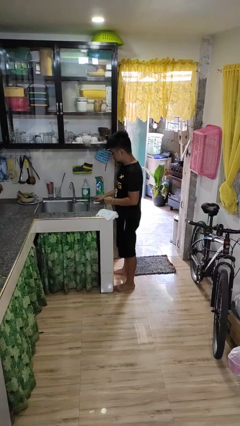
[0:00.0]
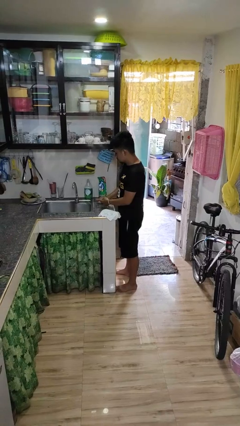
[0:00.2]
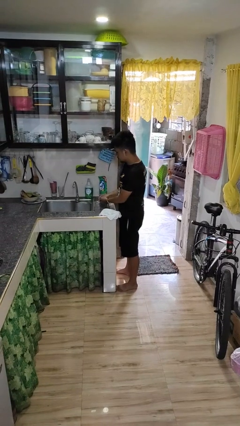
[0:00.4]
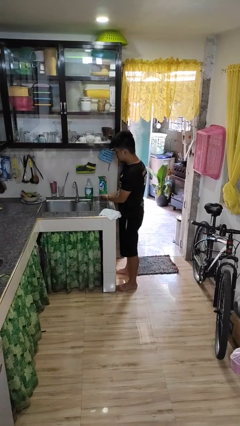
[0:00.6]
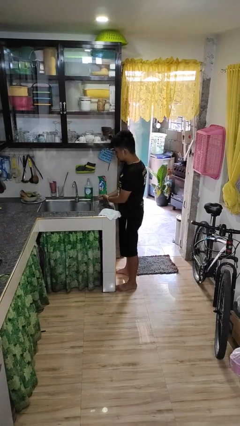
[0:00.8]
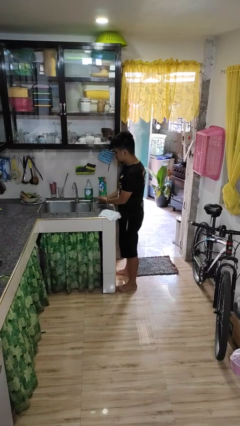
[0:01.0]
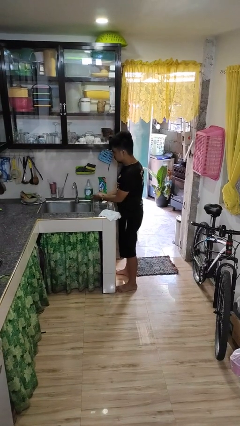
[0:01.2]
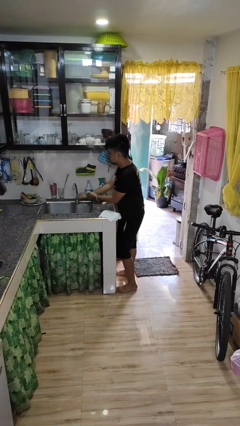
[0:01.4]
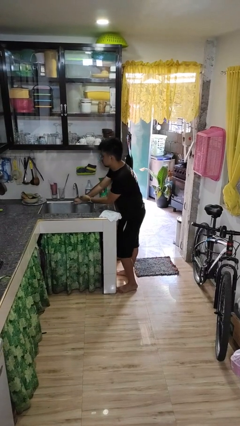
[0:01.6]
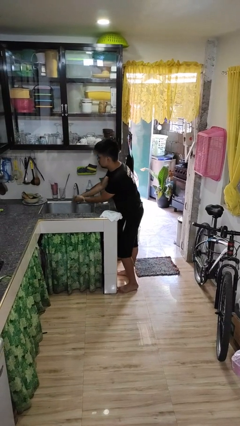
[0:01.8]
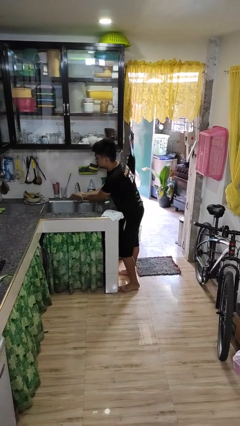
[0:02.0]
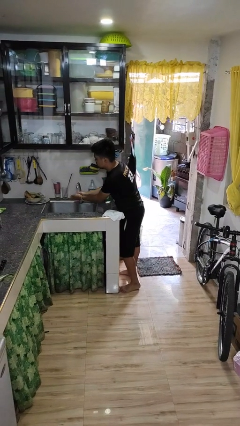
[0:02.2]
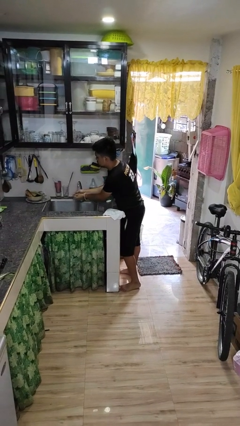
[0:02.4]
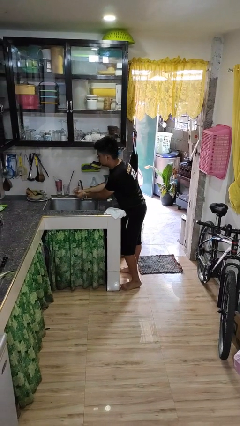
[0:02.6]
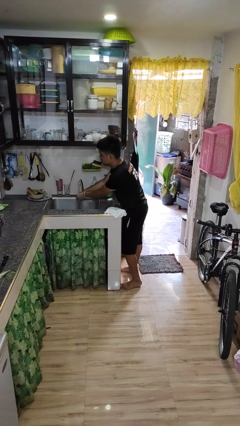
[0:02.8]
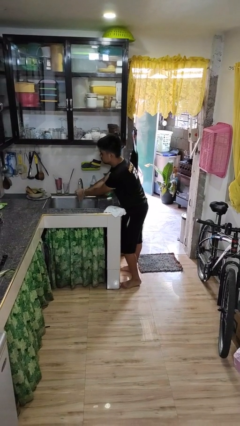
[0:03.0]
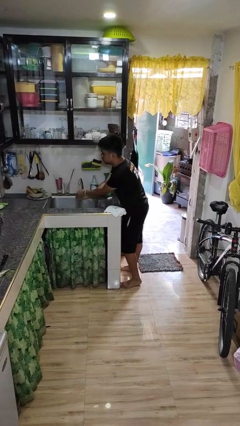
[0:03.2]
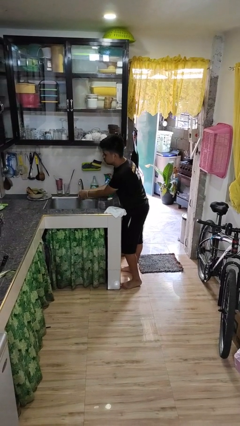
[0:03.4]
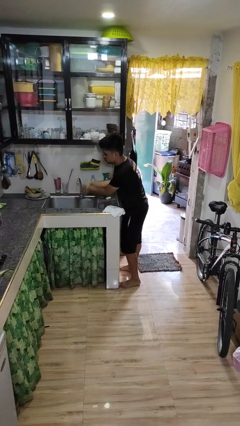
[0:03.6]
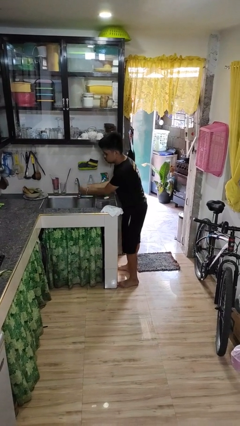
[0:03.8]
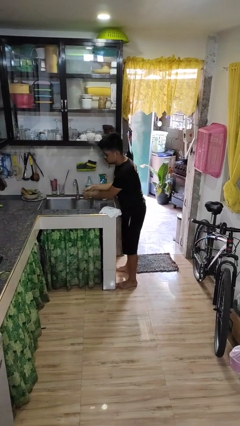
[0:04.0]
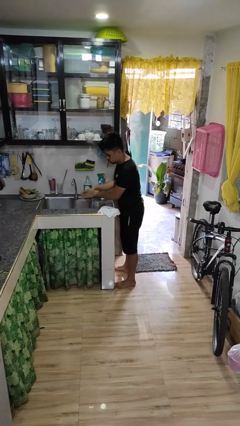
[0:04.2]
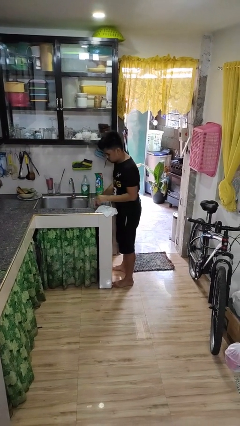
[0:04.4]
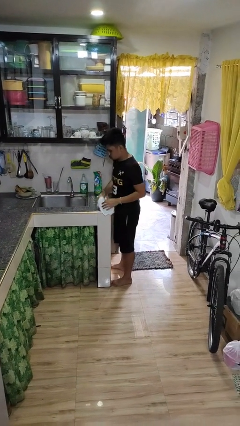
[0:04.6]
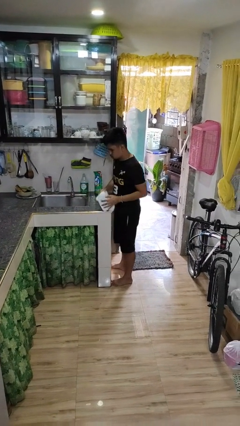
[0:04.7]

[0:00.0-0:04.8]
person washes hands

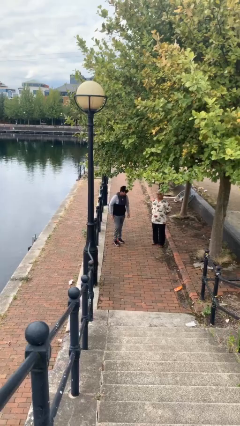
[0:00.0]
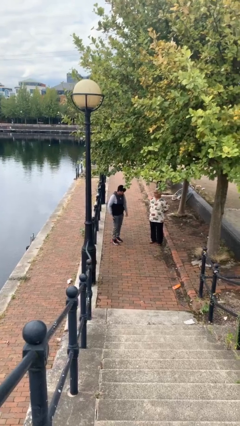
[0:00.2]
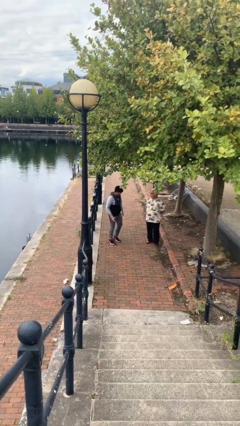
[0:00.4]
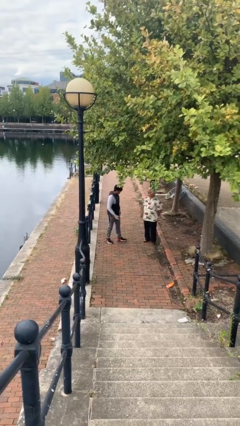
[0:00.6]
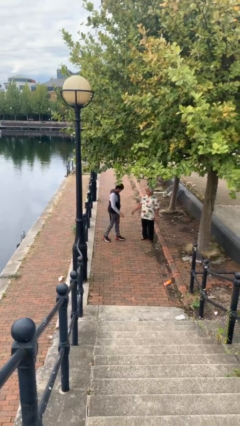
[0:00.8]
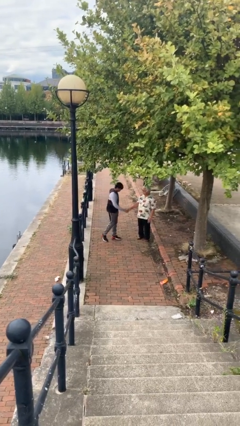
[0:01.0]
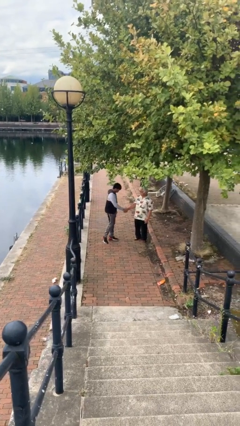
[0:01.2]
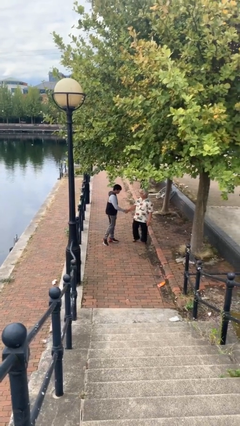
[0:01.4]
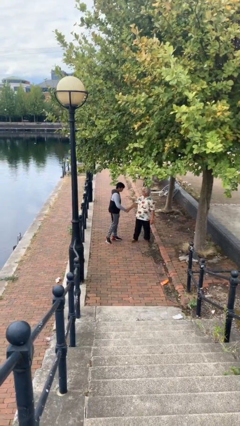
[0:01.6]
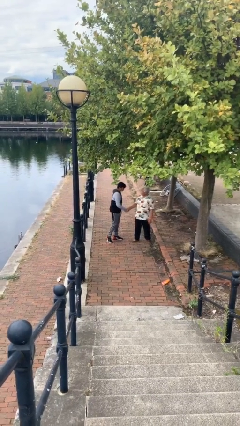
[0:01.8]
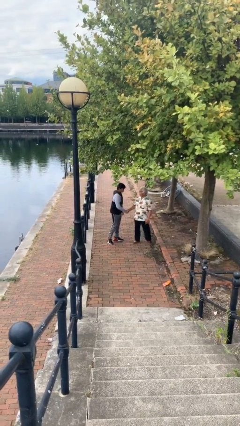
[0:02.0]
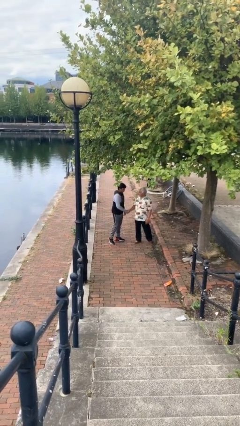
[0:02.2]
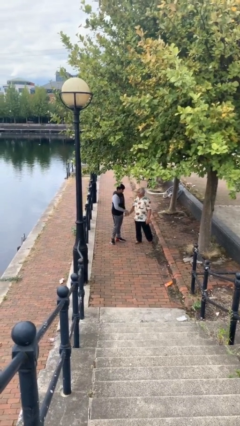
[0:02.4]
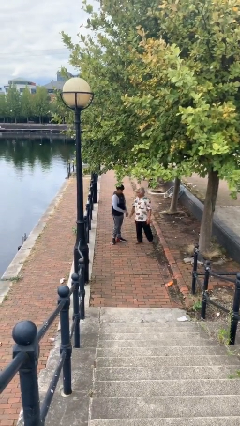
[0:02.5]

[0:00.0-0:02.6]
person shakes hand

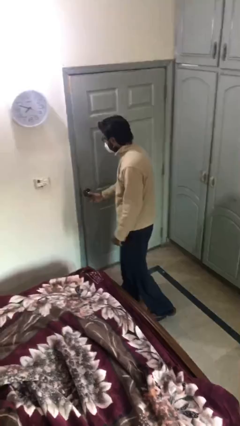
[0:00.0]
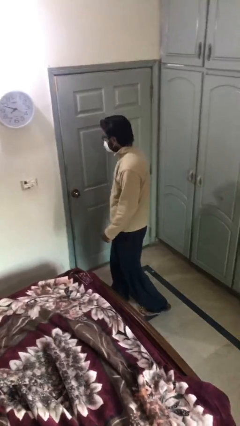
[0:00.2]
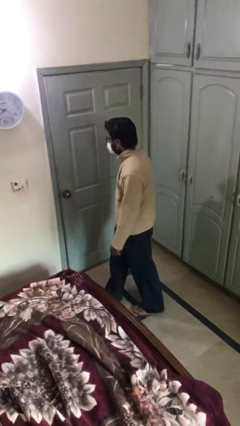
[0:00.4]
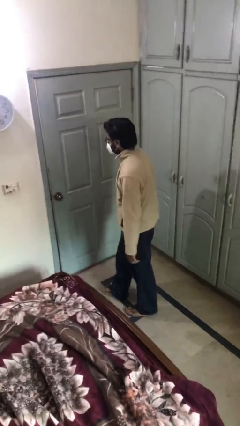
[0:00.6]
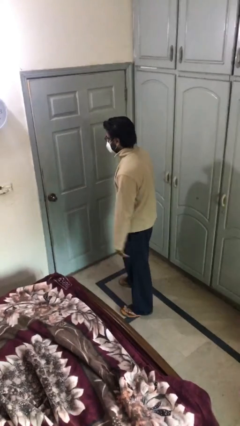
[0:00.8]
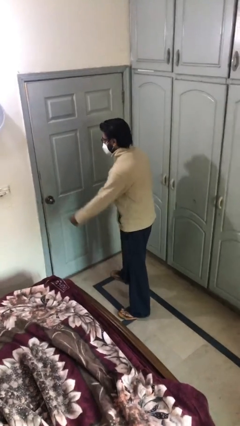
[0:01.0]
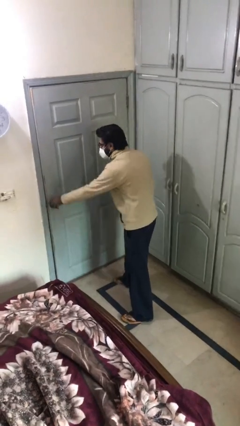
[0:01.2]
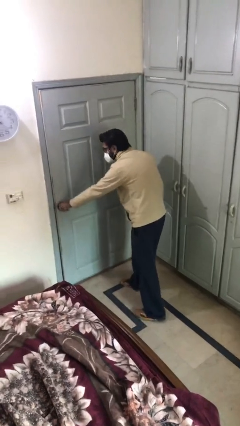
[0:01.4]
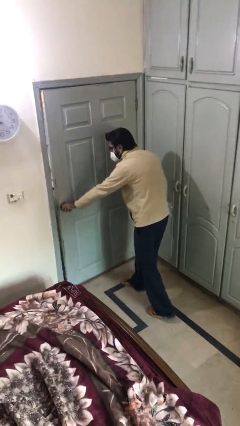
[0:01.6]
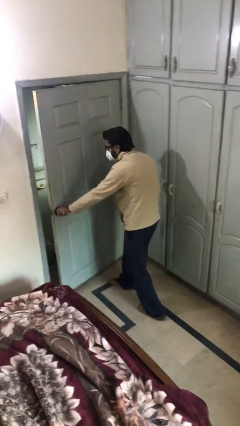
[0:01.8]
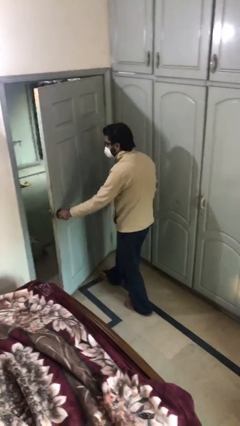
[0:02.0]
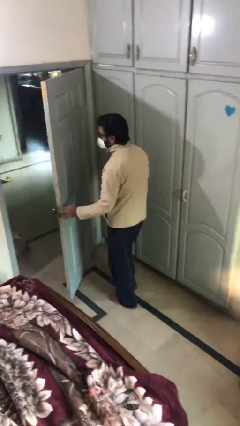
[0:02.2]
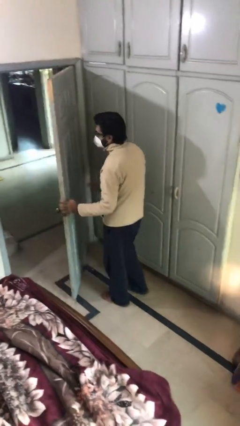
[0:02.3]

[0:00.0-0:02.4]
person opens facility door

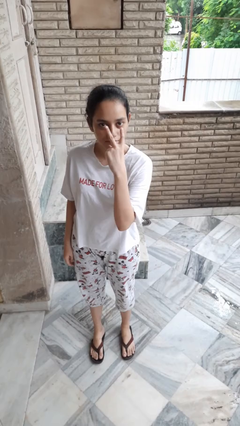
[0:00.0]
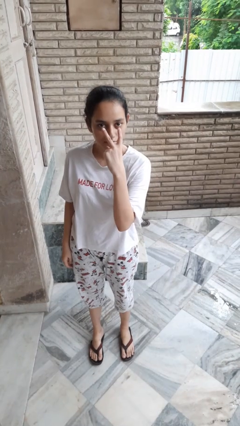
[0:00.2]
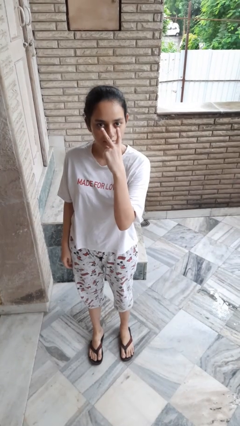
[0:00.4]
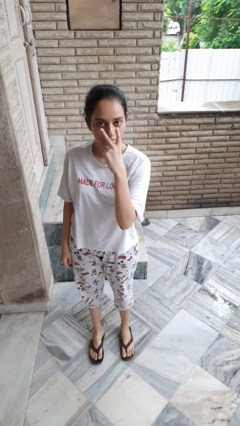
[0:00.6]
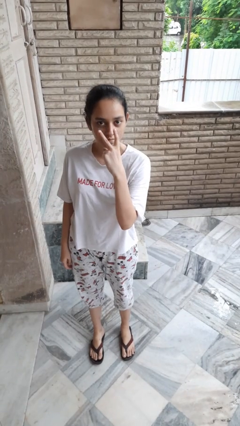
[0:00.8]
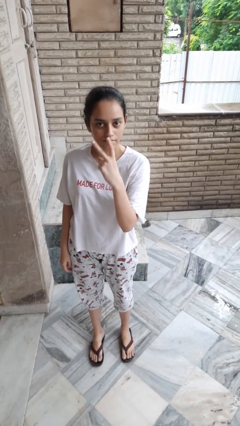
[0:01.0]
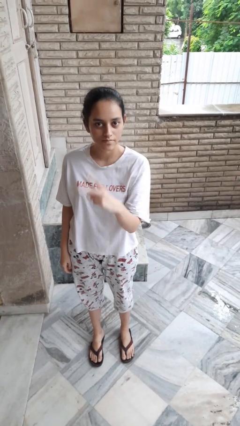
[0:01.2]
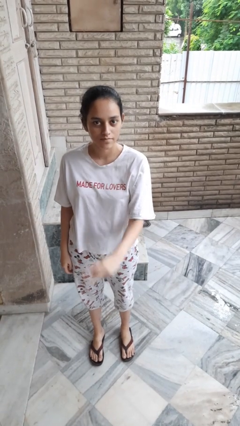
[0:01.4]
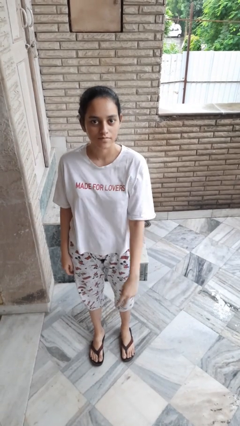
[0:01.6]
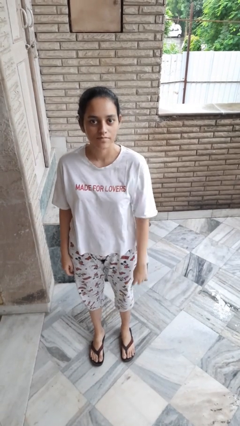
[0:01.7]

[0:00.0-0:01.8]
person gestures watch closely

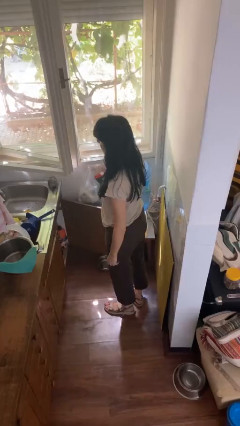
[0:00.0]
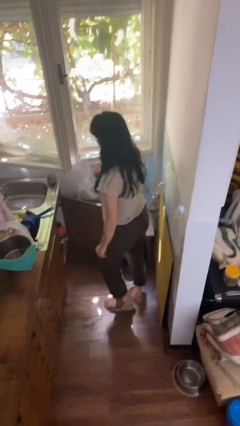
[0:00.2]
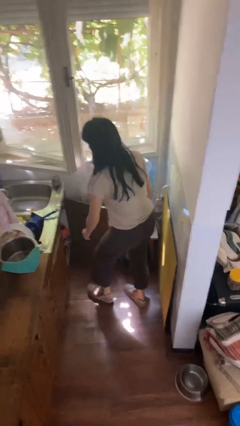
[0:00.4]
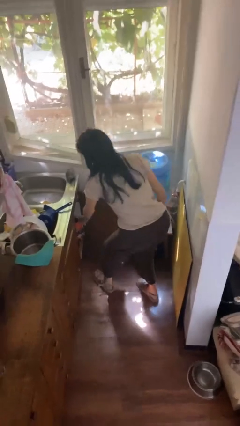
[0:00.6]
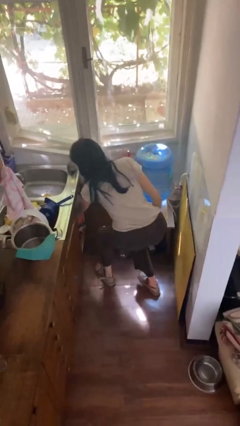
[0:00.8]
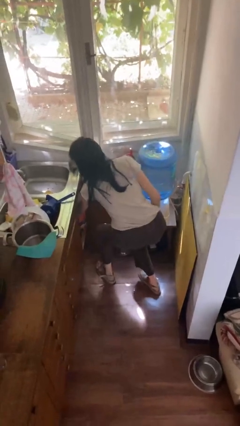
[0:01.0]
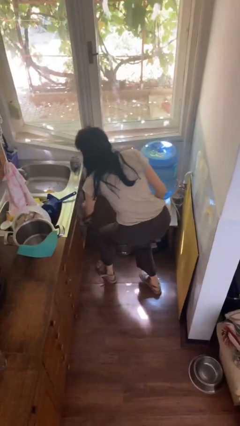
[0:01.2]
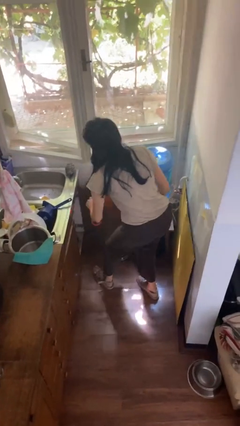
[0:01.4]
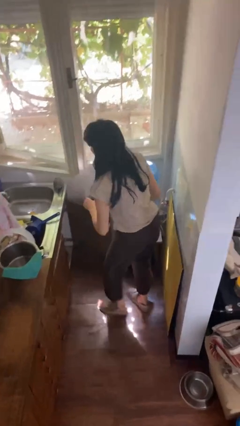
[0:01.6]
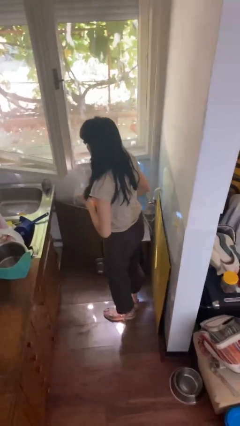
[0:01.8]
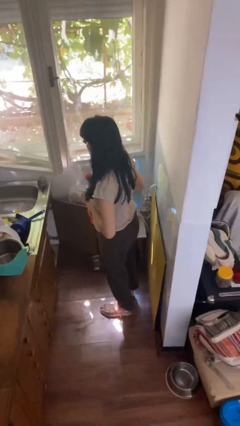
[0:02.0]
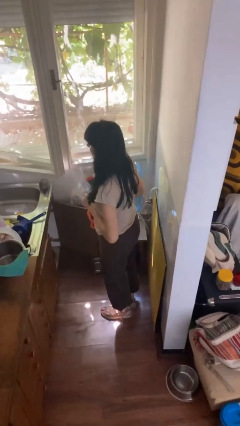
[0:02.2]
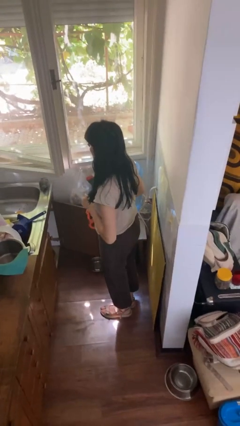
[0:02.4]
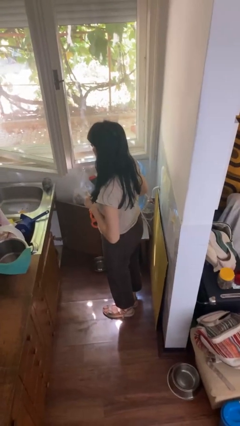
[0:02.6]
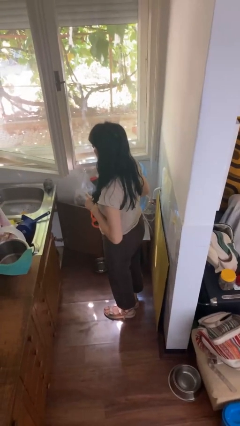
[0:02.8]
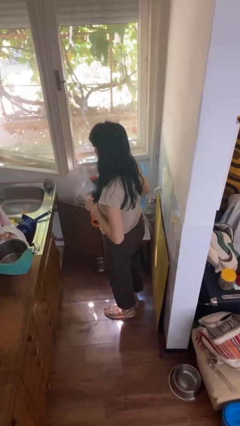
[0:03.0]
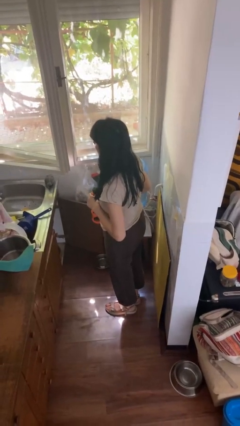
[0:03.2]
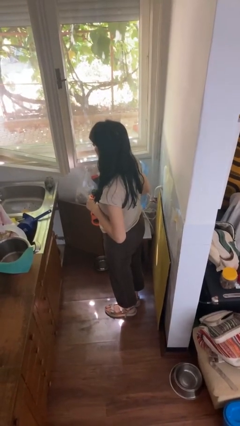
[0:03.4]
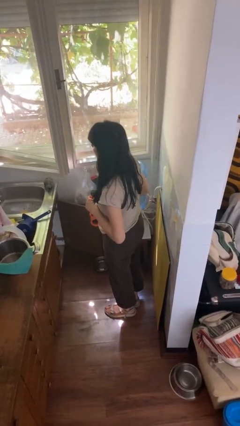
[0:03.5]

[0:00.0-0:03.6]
person picks up object from cabinet

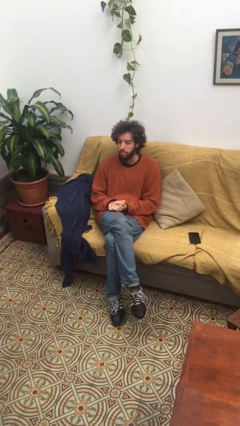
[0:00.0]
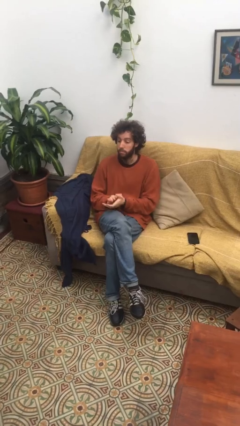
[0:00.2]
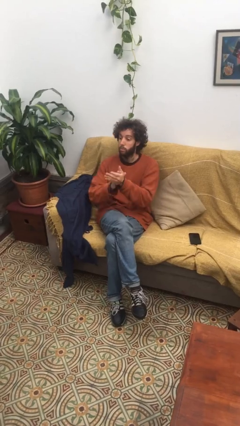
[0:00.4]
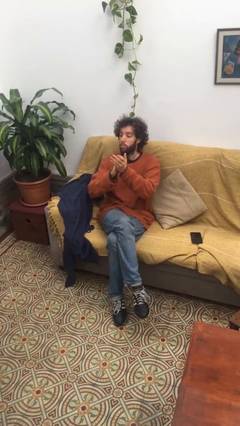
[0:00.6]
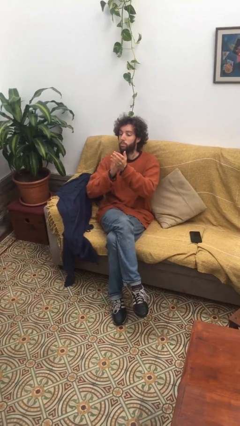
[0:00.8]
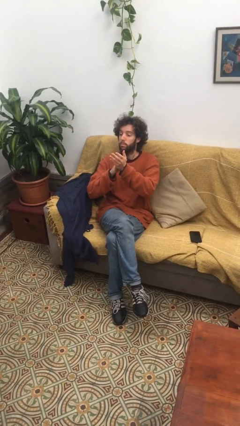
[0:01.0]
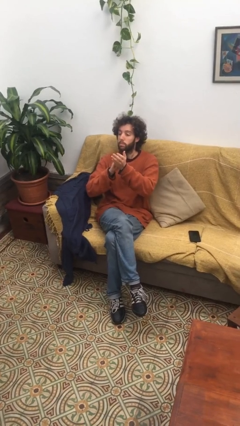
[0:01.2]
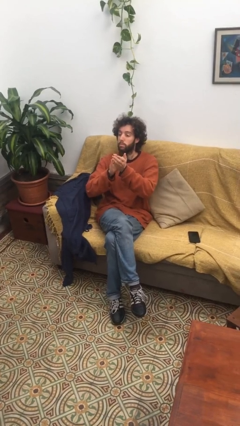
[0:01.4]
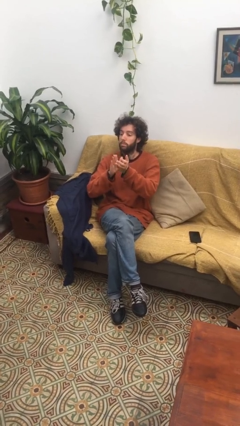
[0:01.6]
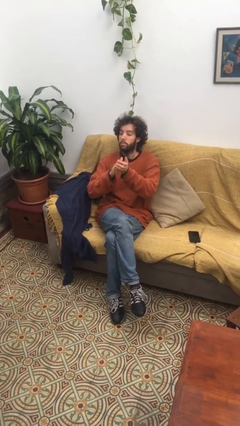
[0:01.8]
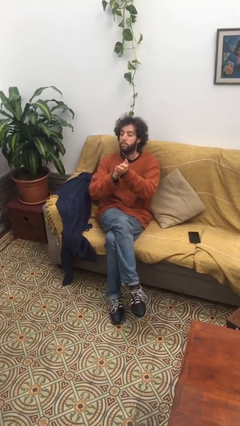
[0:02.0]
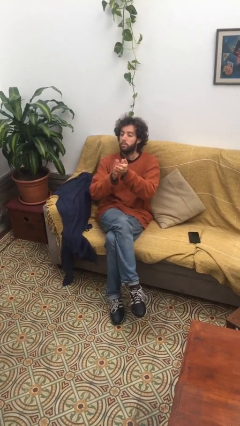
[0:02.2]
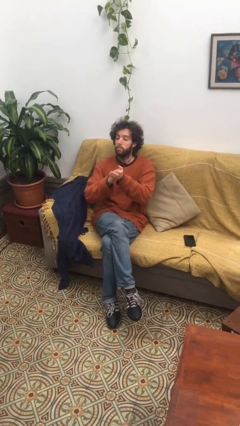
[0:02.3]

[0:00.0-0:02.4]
person claps hands

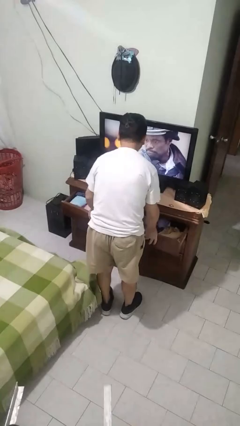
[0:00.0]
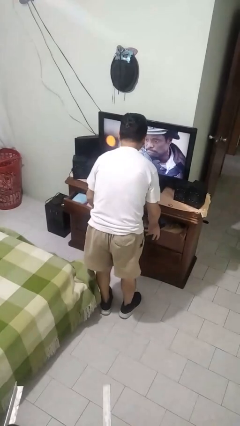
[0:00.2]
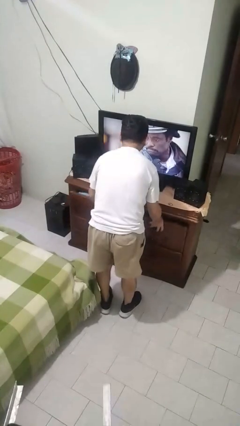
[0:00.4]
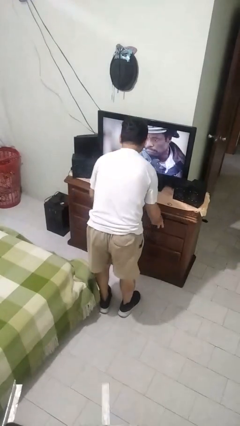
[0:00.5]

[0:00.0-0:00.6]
person closes dresser drawer
